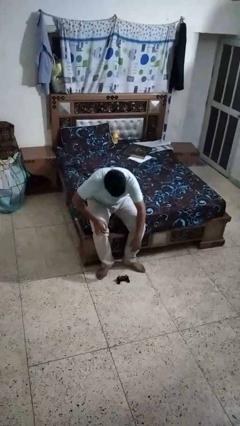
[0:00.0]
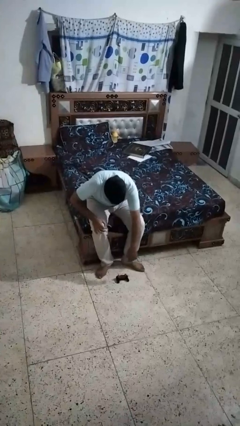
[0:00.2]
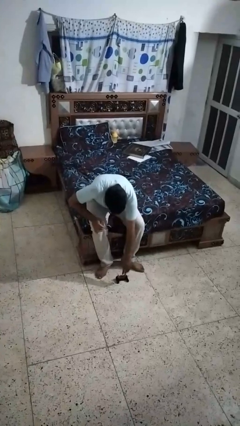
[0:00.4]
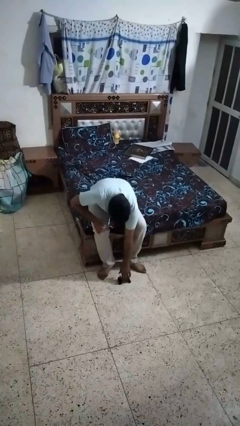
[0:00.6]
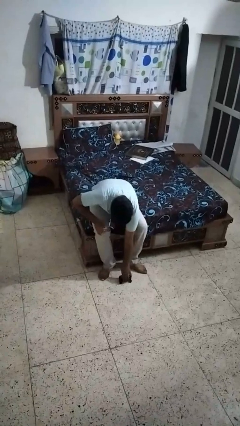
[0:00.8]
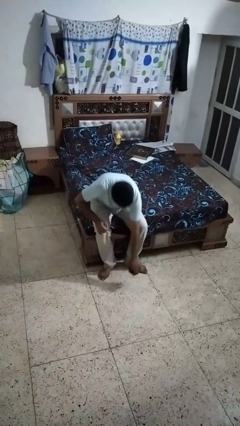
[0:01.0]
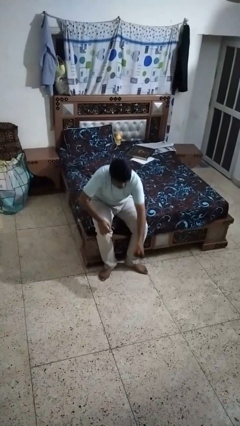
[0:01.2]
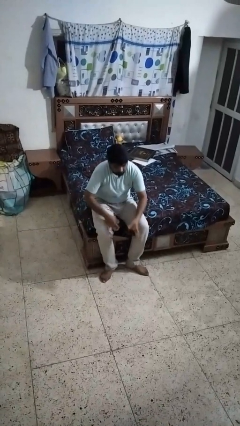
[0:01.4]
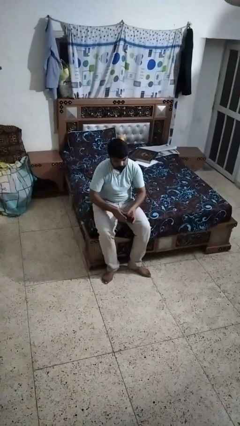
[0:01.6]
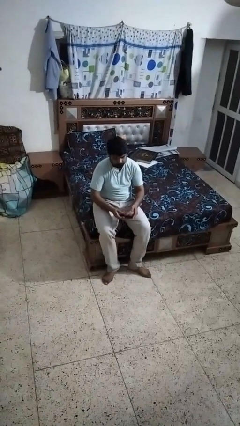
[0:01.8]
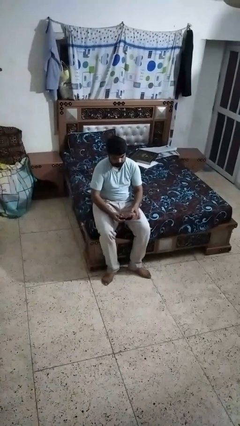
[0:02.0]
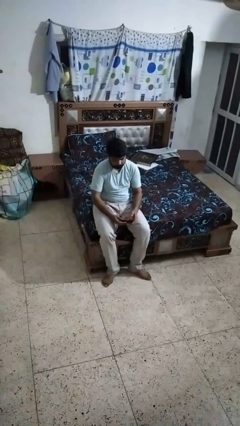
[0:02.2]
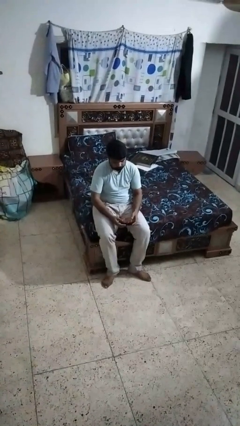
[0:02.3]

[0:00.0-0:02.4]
person picks up object from floor

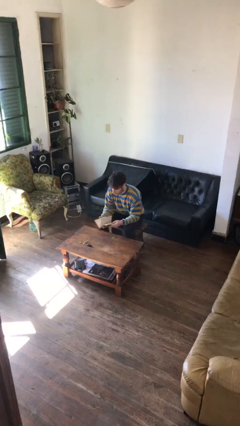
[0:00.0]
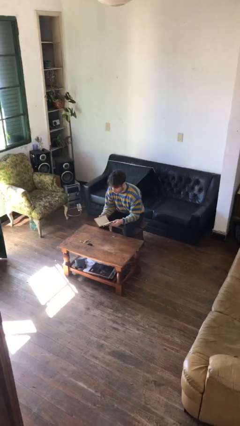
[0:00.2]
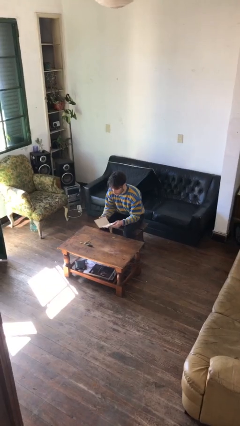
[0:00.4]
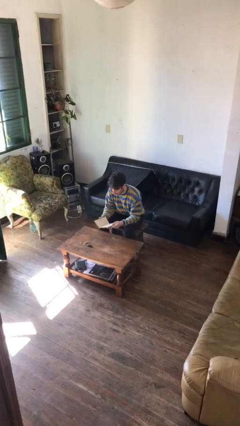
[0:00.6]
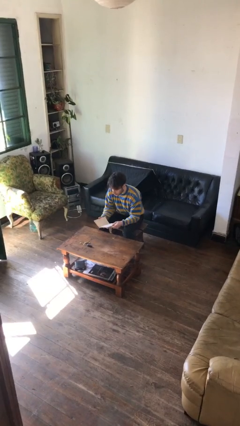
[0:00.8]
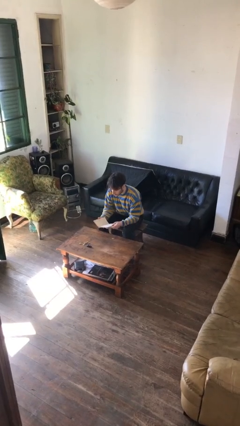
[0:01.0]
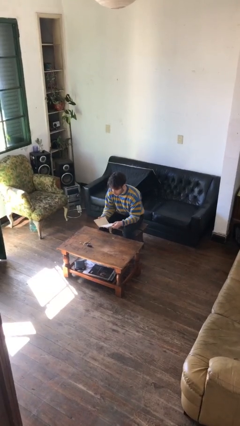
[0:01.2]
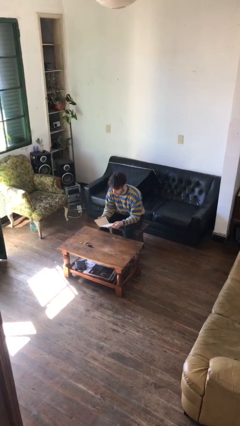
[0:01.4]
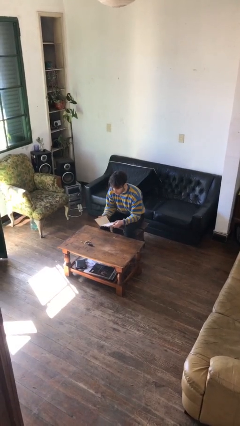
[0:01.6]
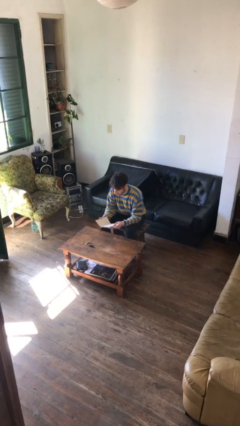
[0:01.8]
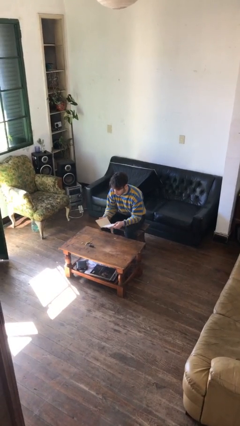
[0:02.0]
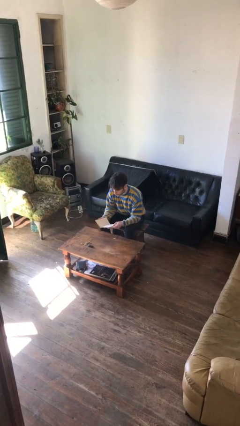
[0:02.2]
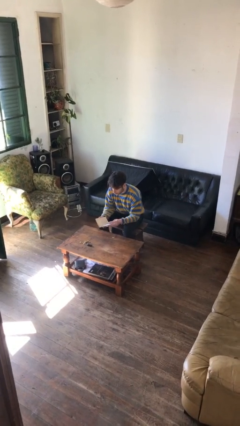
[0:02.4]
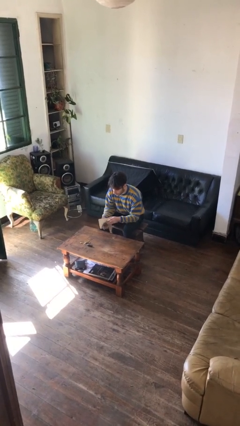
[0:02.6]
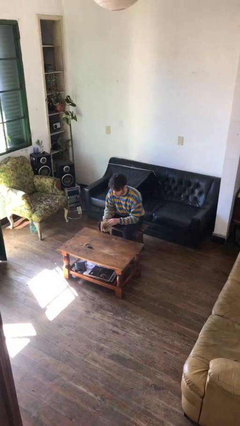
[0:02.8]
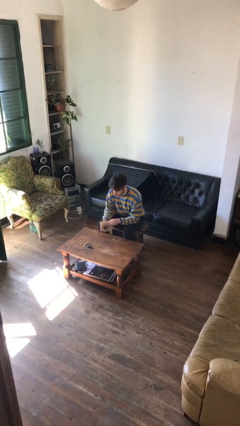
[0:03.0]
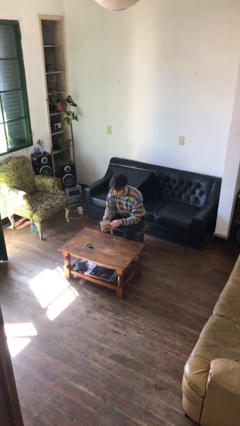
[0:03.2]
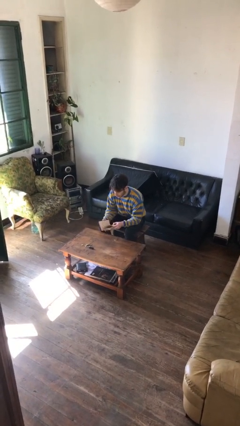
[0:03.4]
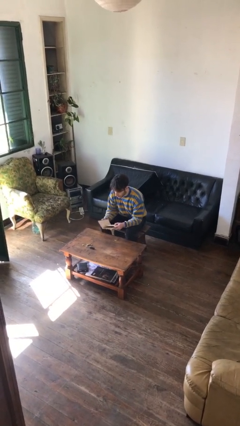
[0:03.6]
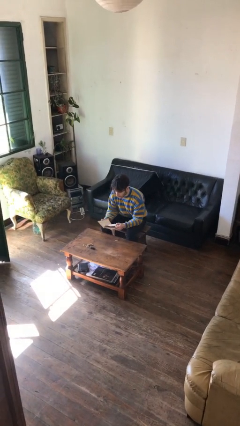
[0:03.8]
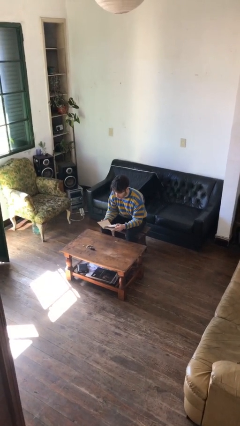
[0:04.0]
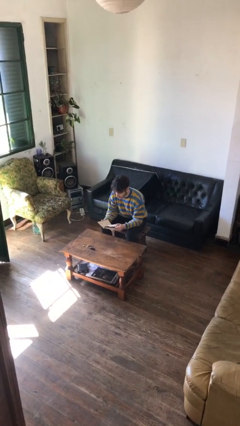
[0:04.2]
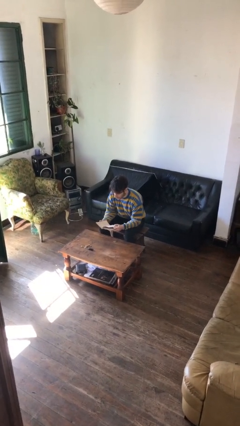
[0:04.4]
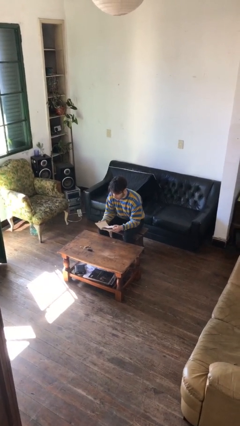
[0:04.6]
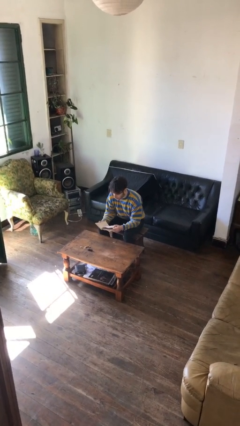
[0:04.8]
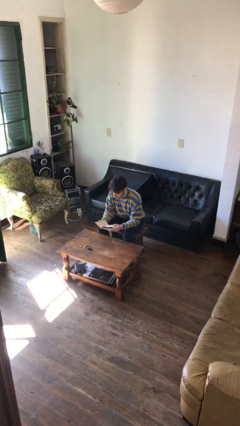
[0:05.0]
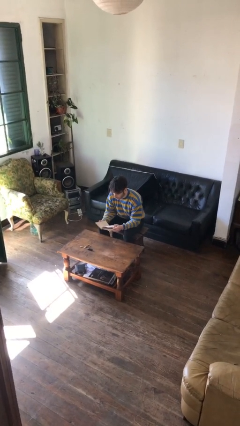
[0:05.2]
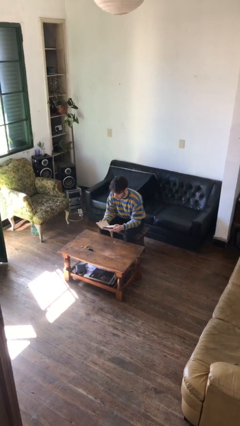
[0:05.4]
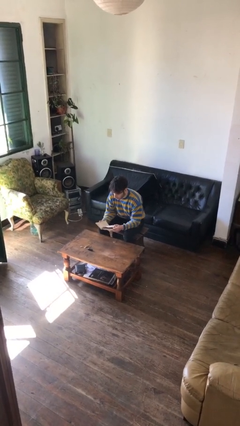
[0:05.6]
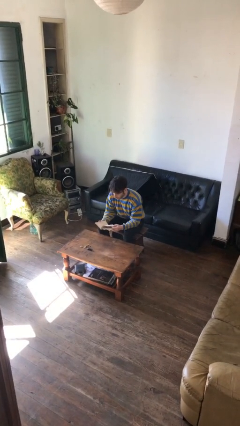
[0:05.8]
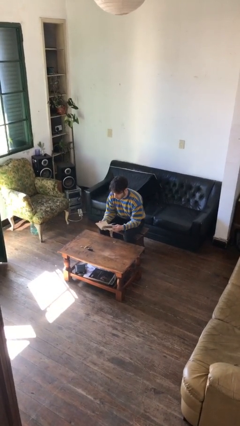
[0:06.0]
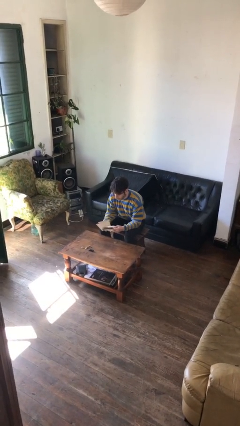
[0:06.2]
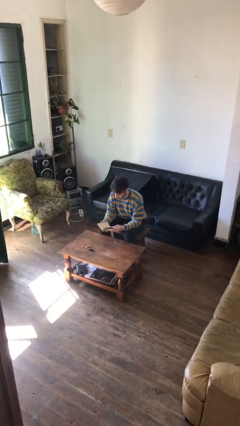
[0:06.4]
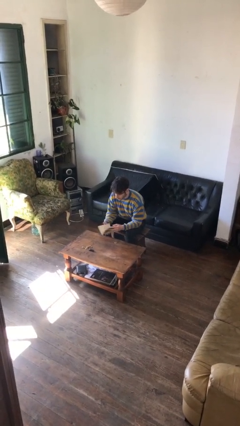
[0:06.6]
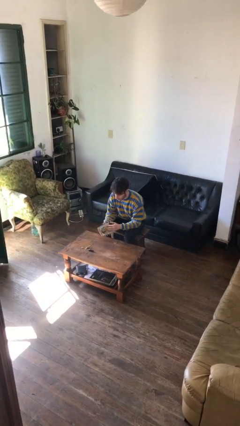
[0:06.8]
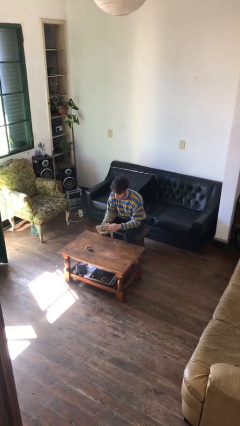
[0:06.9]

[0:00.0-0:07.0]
person reads document

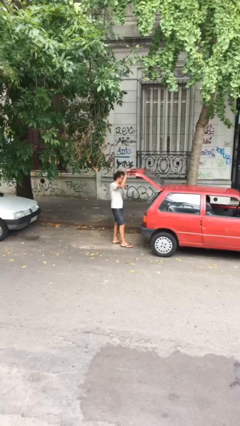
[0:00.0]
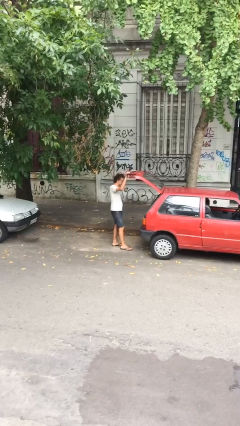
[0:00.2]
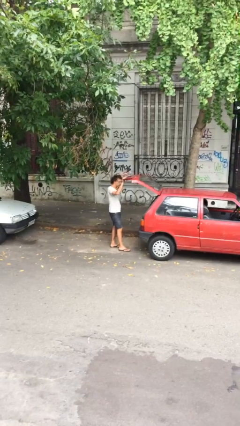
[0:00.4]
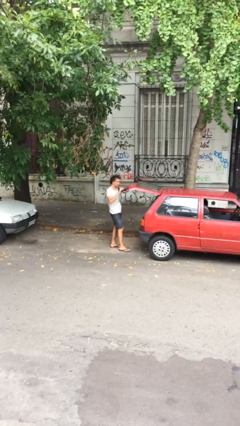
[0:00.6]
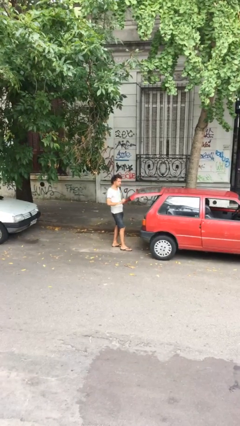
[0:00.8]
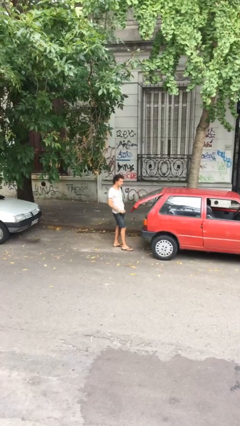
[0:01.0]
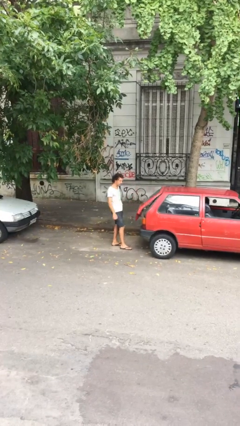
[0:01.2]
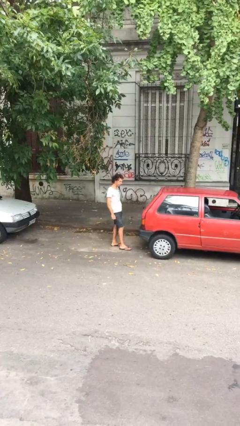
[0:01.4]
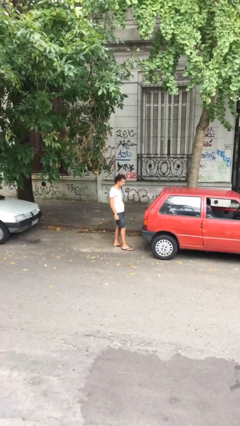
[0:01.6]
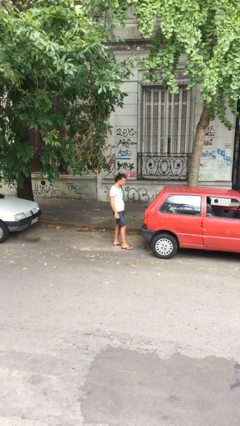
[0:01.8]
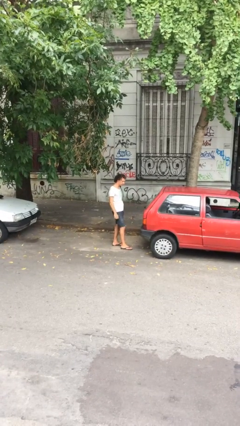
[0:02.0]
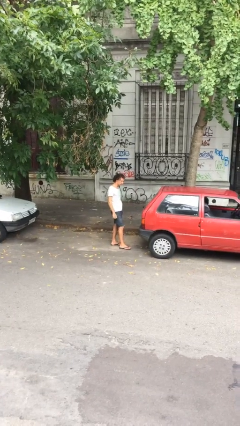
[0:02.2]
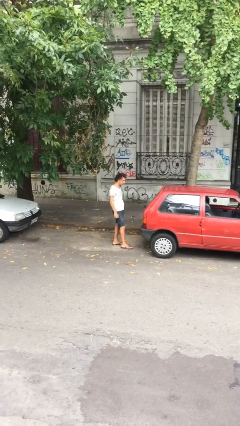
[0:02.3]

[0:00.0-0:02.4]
person closes car trunk

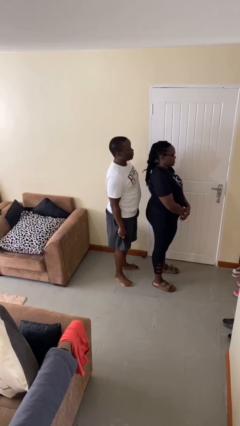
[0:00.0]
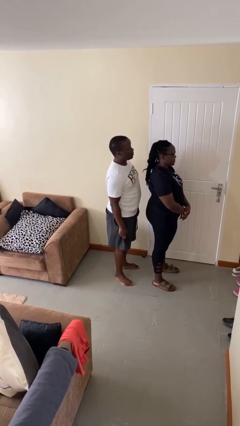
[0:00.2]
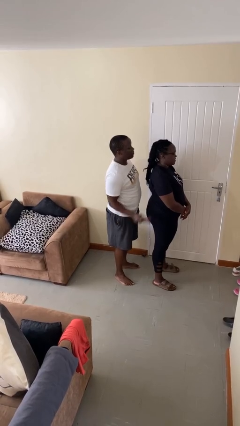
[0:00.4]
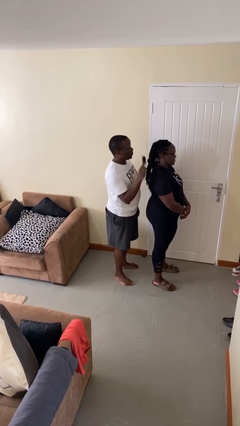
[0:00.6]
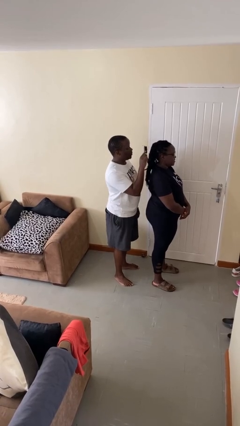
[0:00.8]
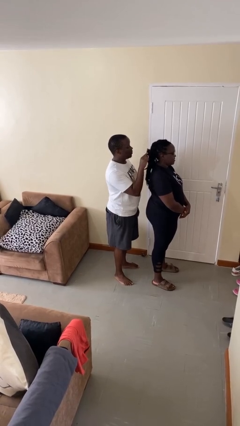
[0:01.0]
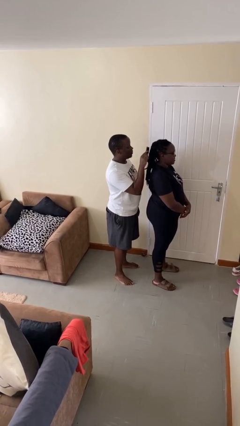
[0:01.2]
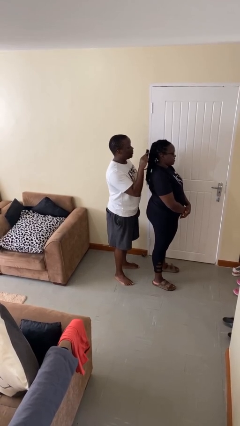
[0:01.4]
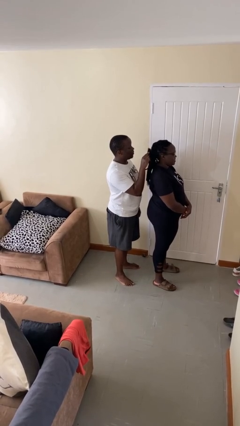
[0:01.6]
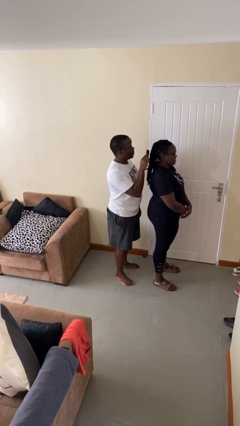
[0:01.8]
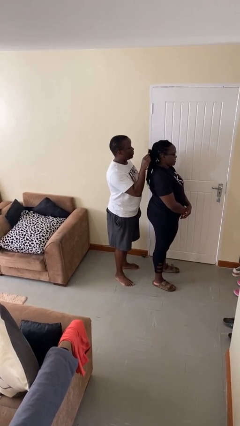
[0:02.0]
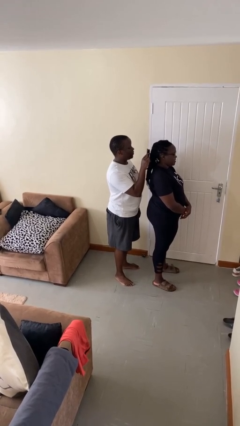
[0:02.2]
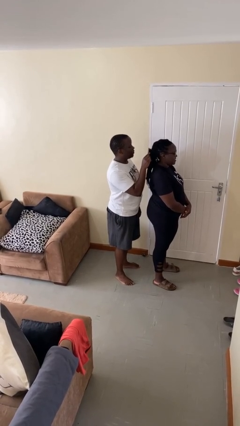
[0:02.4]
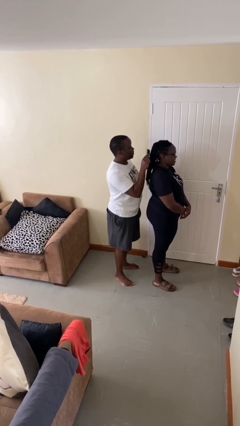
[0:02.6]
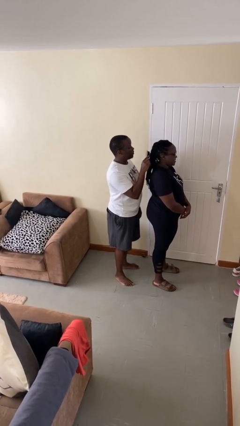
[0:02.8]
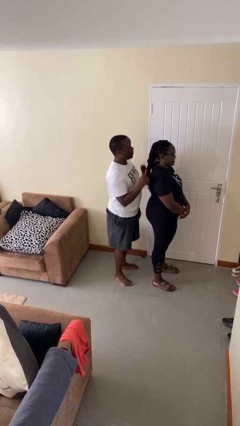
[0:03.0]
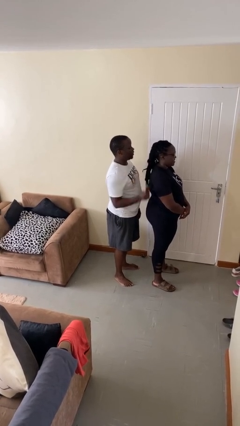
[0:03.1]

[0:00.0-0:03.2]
person brushes hair of person

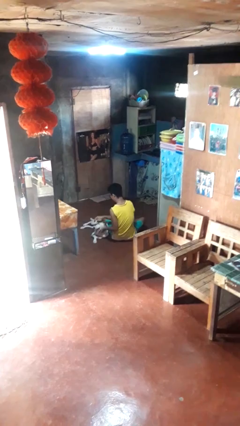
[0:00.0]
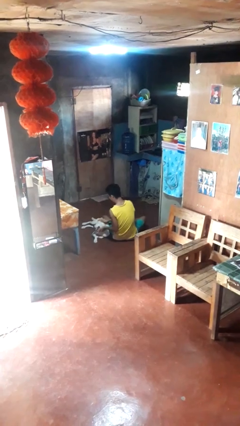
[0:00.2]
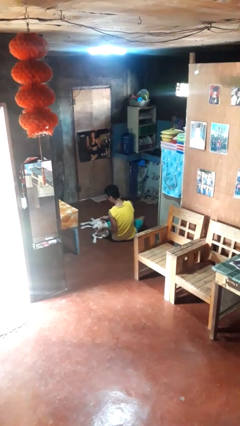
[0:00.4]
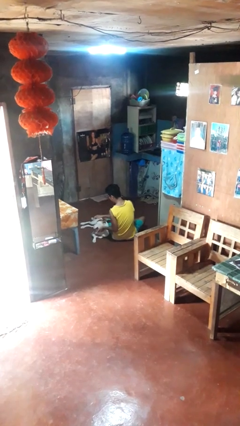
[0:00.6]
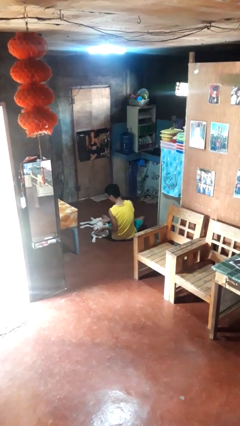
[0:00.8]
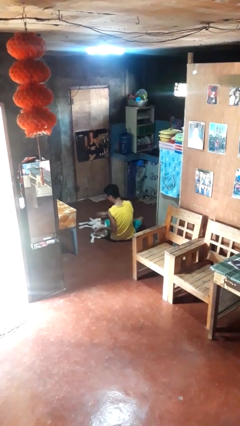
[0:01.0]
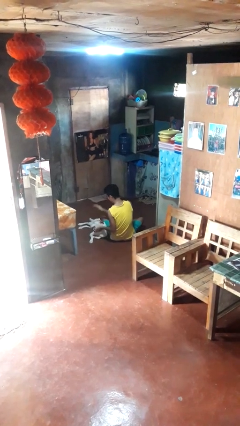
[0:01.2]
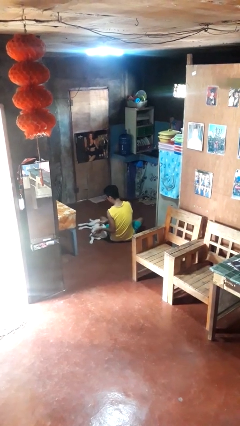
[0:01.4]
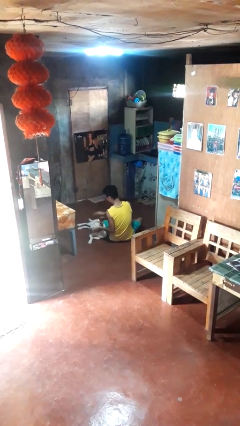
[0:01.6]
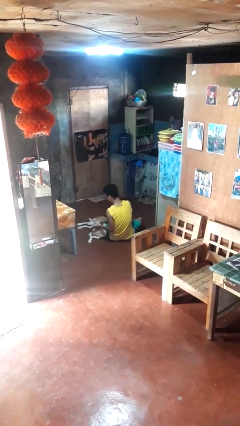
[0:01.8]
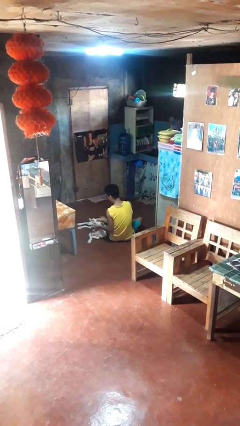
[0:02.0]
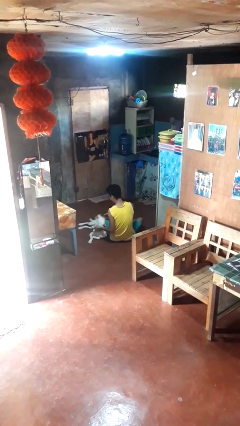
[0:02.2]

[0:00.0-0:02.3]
person pets dog
